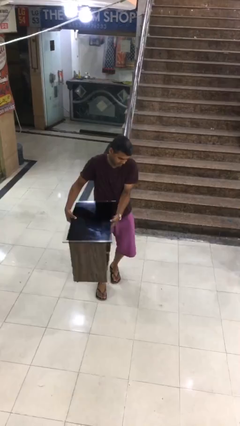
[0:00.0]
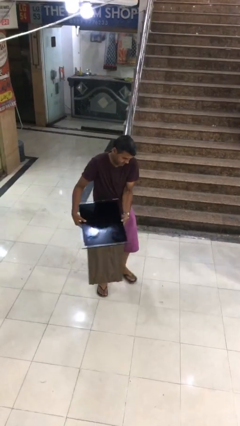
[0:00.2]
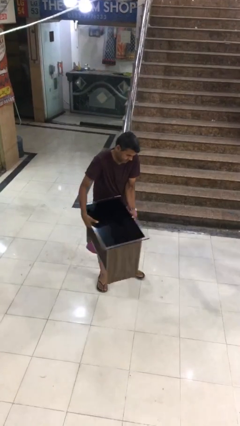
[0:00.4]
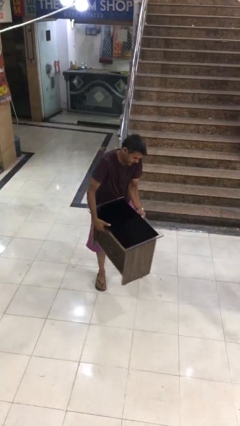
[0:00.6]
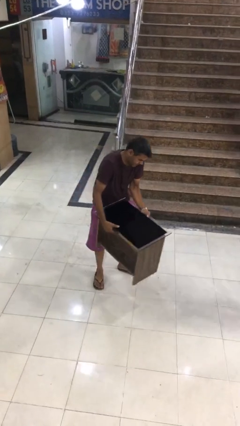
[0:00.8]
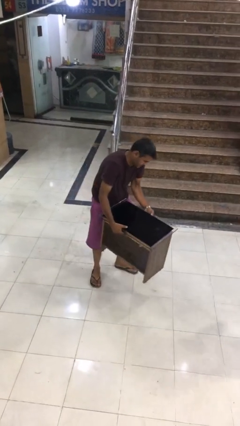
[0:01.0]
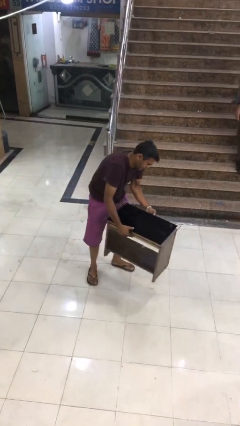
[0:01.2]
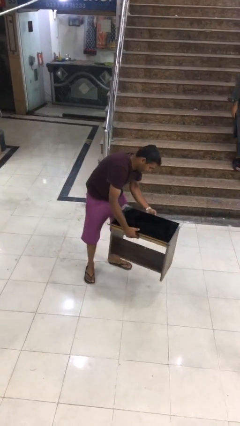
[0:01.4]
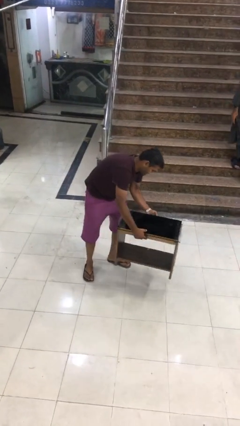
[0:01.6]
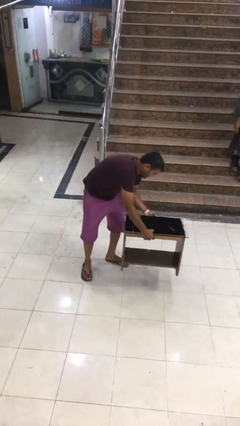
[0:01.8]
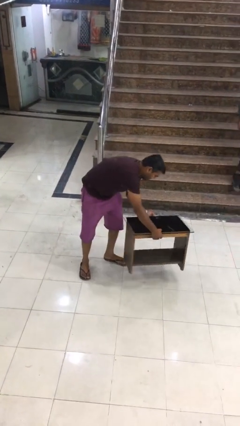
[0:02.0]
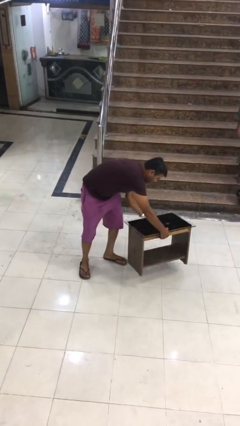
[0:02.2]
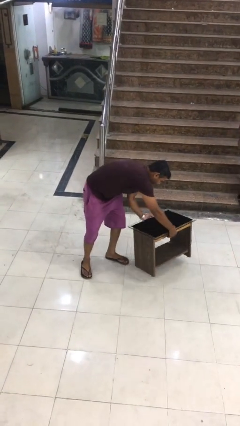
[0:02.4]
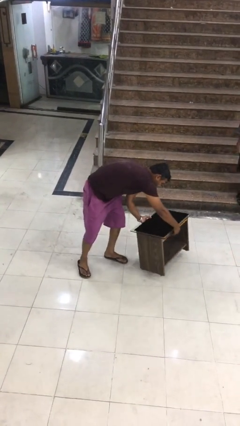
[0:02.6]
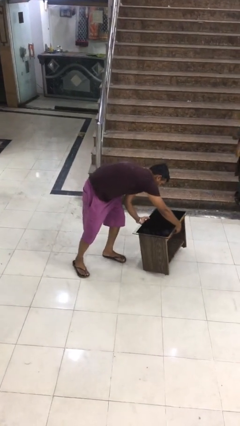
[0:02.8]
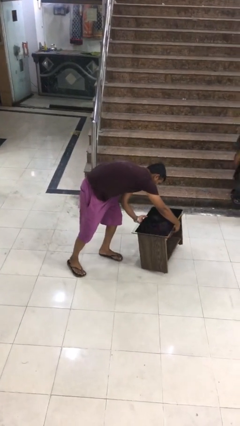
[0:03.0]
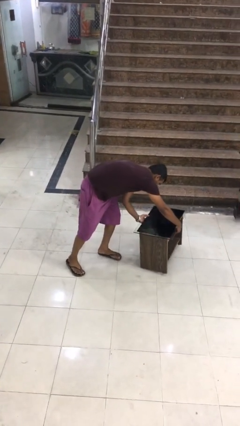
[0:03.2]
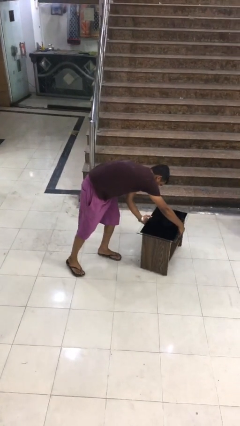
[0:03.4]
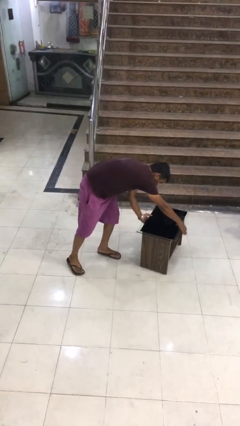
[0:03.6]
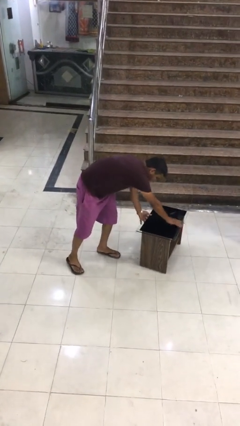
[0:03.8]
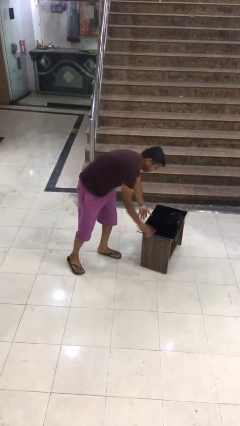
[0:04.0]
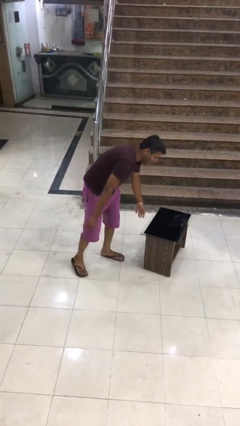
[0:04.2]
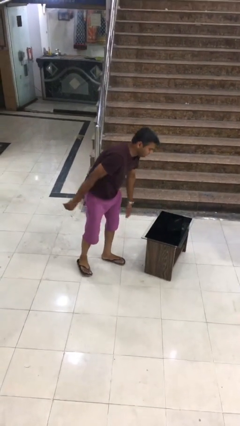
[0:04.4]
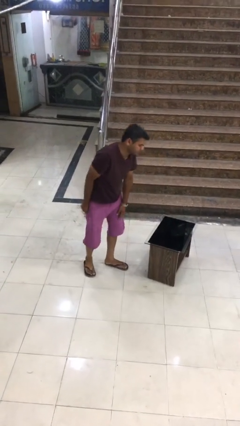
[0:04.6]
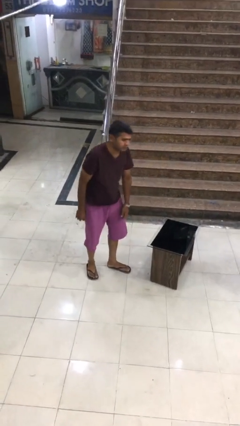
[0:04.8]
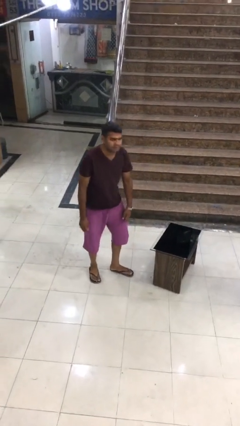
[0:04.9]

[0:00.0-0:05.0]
person puts down object on floor

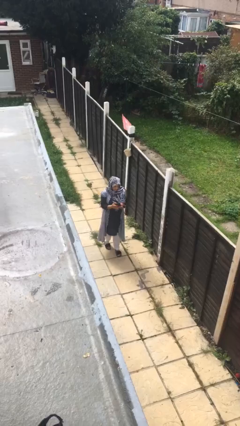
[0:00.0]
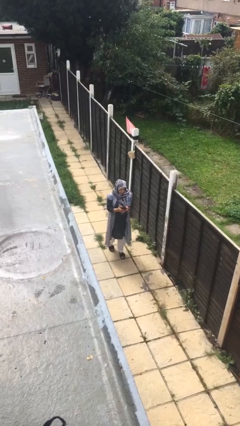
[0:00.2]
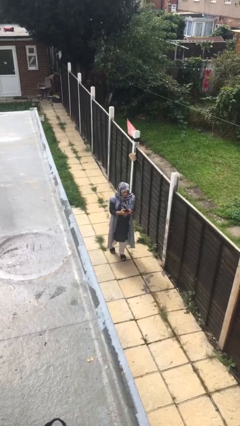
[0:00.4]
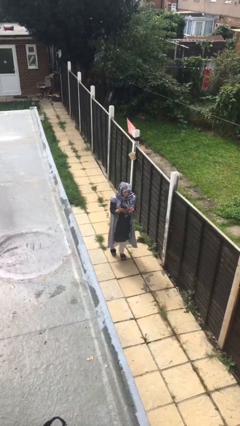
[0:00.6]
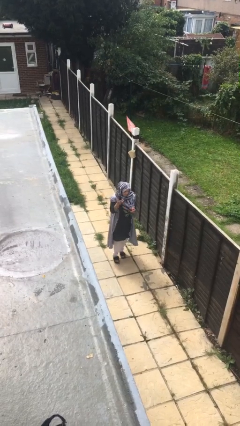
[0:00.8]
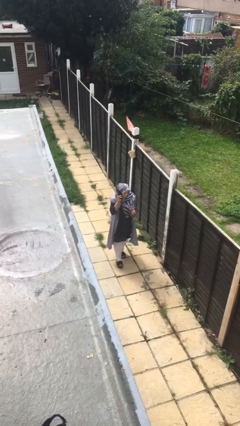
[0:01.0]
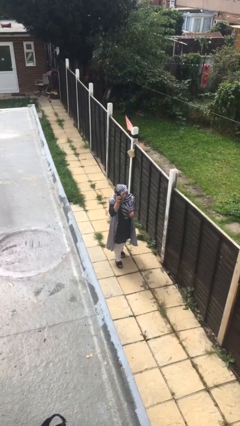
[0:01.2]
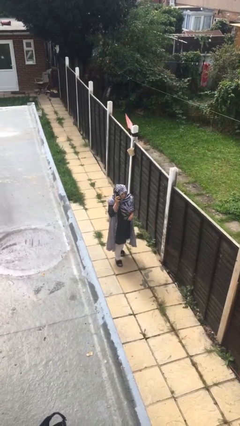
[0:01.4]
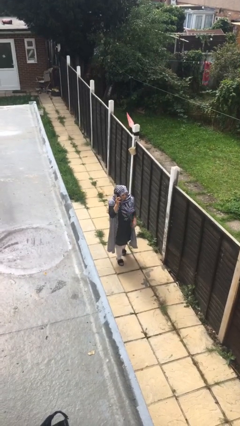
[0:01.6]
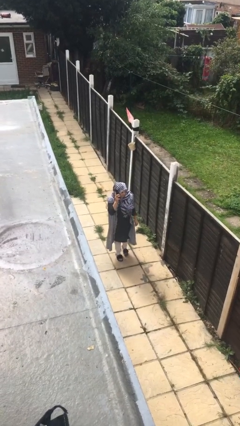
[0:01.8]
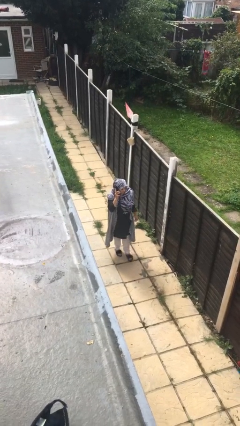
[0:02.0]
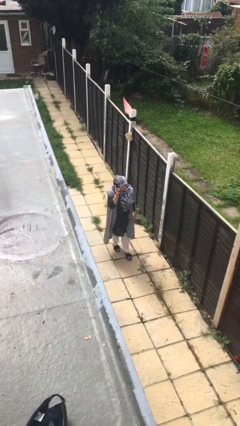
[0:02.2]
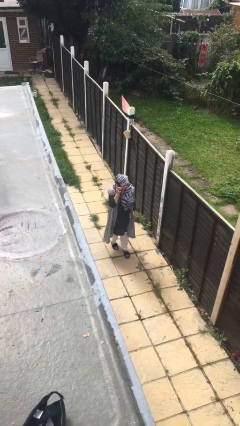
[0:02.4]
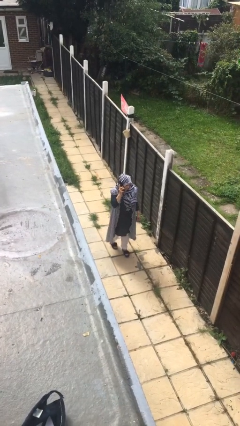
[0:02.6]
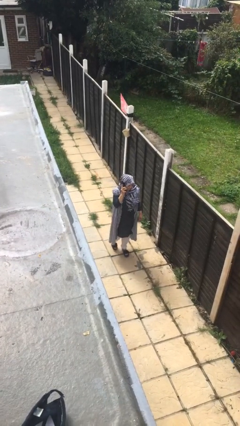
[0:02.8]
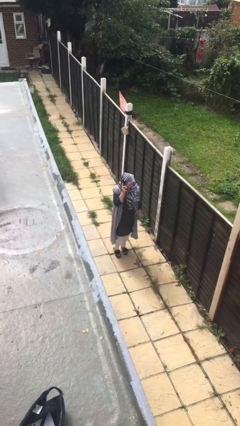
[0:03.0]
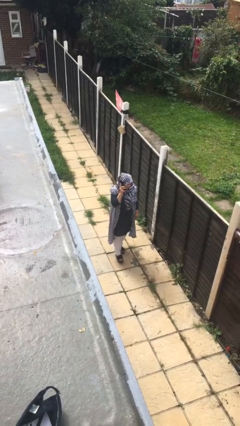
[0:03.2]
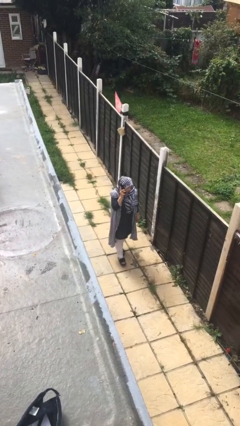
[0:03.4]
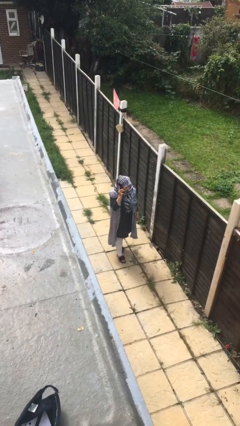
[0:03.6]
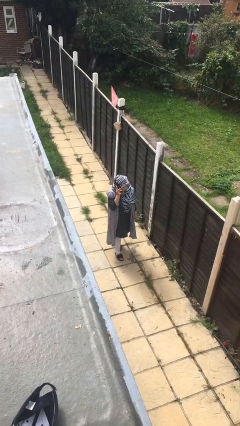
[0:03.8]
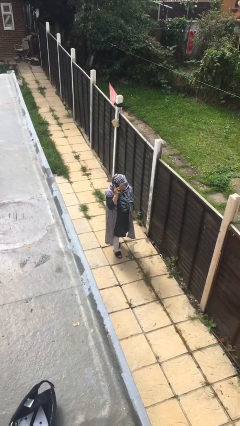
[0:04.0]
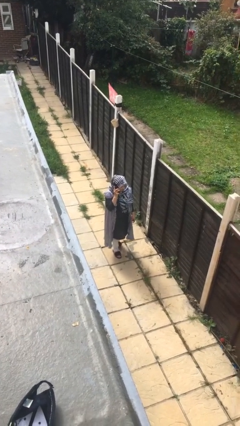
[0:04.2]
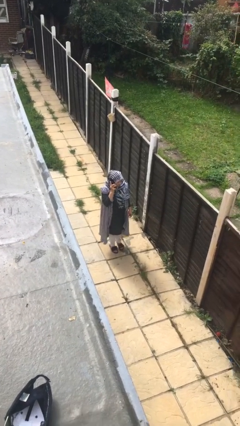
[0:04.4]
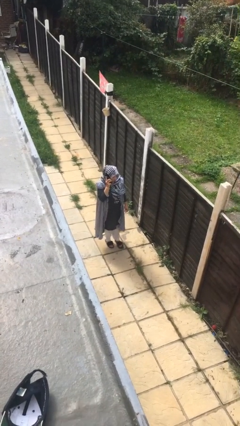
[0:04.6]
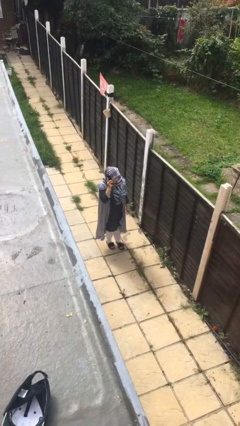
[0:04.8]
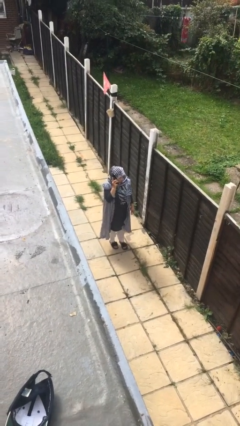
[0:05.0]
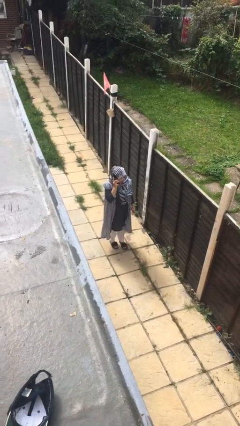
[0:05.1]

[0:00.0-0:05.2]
person talks on phone

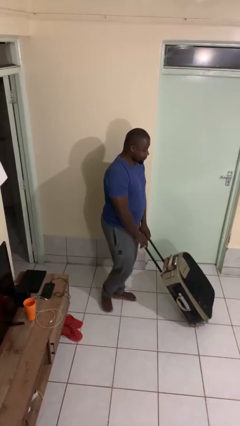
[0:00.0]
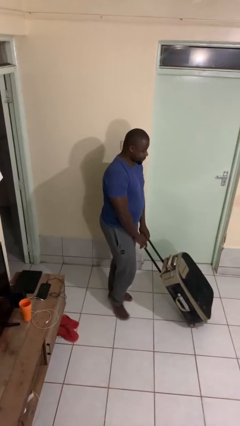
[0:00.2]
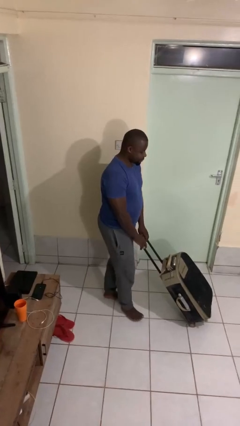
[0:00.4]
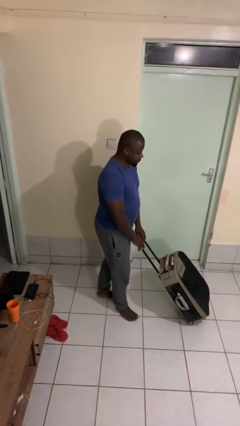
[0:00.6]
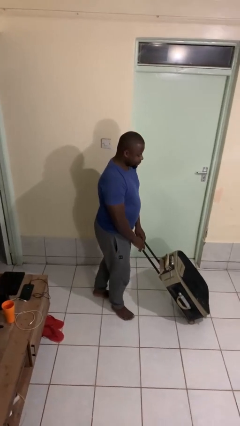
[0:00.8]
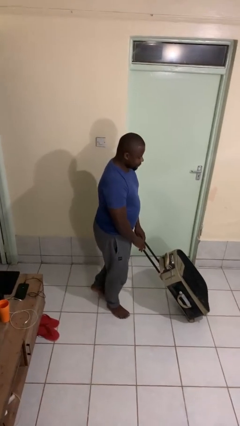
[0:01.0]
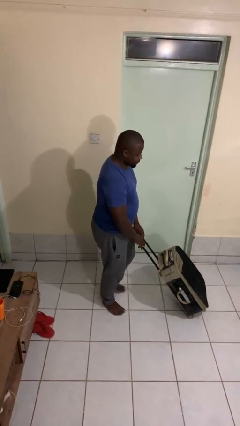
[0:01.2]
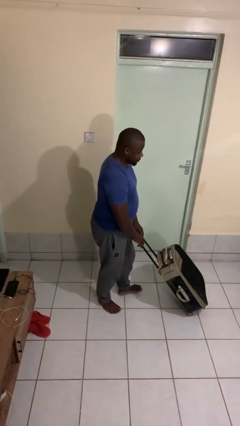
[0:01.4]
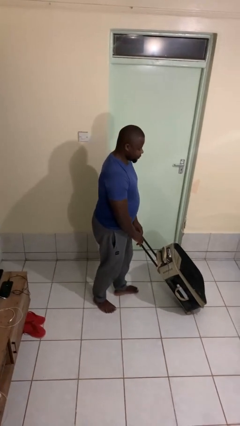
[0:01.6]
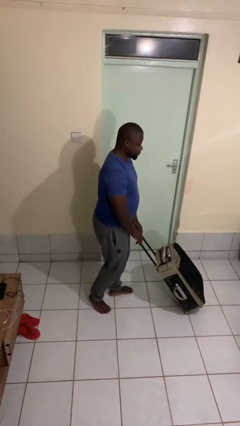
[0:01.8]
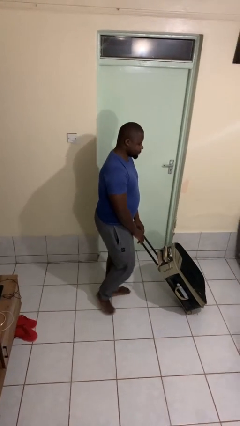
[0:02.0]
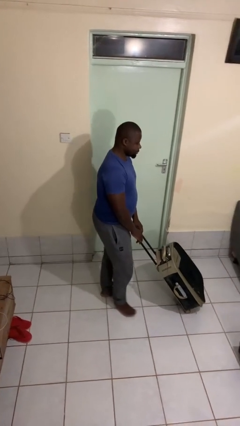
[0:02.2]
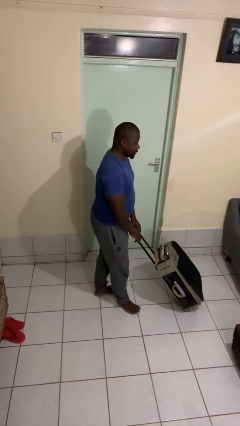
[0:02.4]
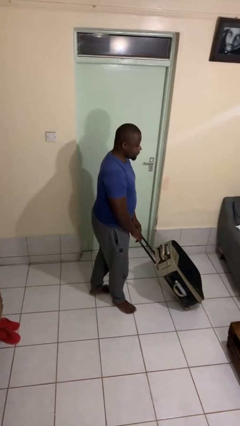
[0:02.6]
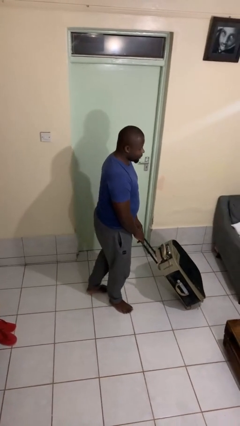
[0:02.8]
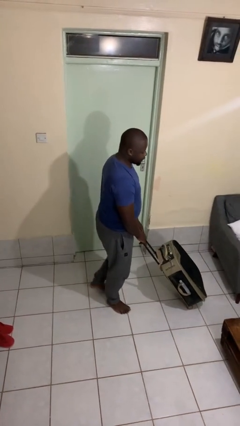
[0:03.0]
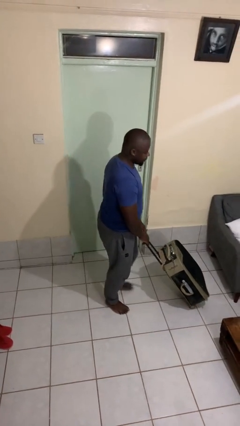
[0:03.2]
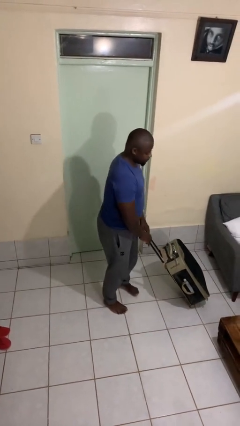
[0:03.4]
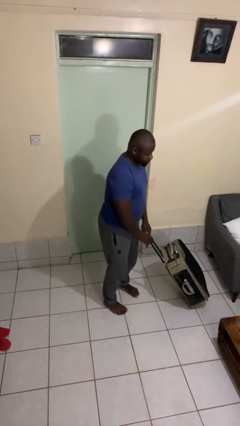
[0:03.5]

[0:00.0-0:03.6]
person pushes wheeled cart

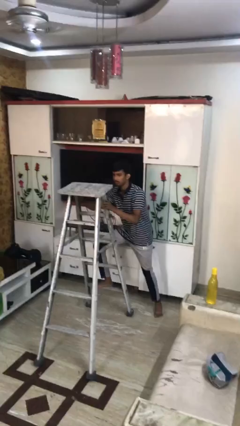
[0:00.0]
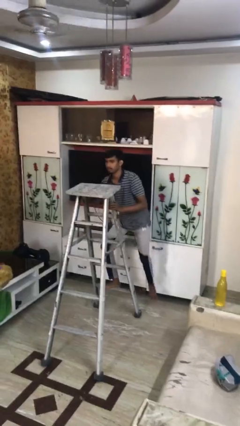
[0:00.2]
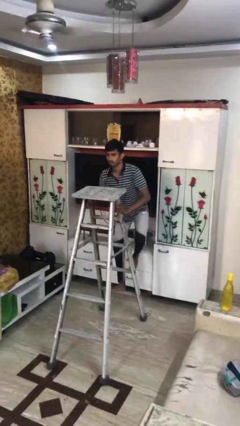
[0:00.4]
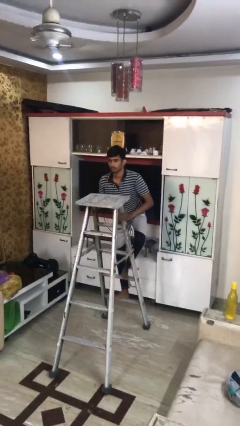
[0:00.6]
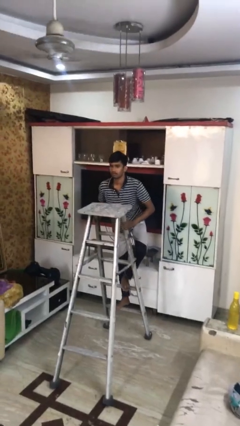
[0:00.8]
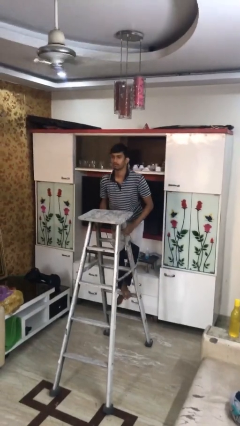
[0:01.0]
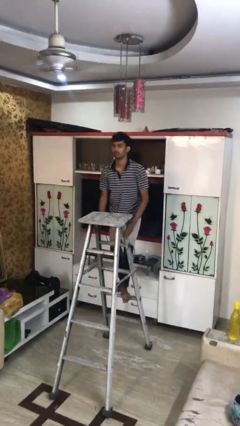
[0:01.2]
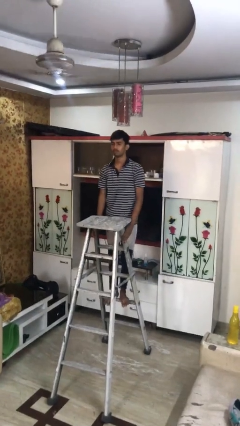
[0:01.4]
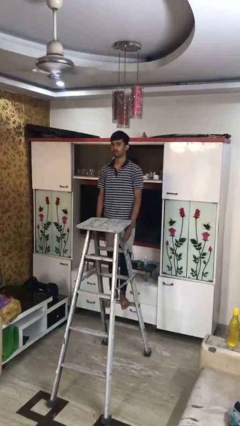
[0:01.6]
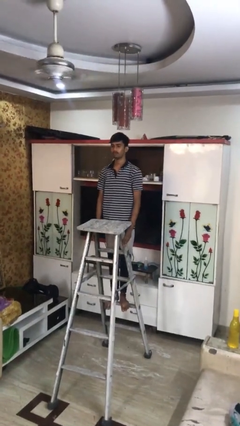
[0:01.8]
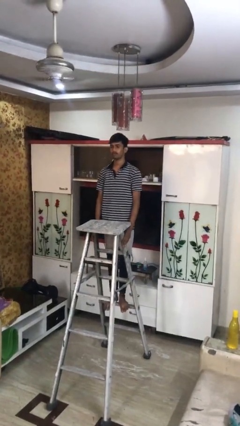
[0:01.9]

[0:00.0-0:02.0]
person climbs up ladder

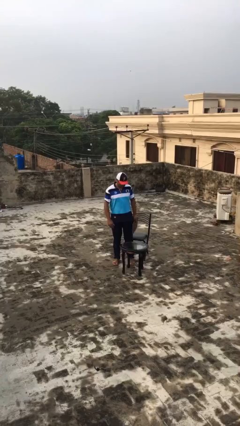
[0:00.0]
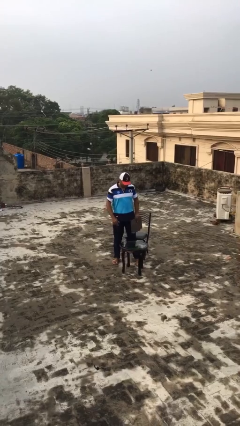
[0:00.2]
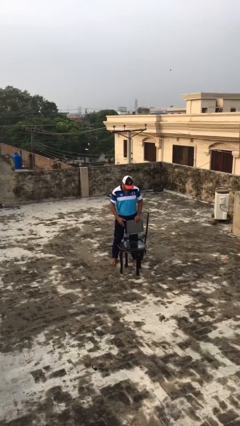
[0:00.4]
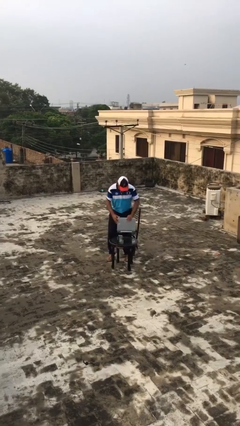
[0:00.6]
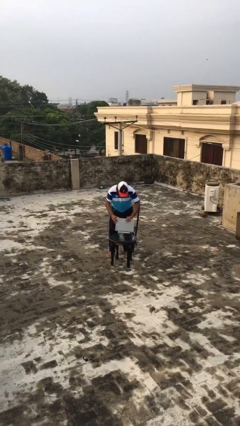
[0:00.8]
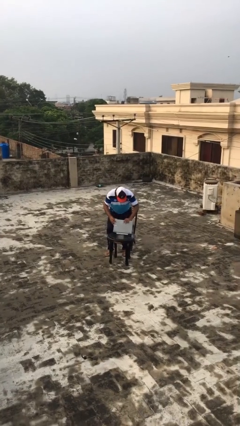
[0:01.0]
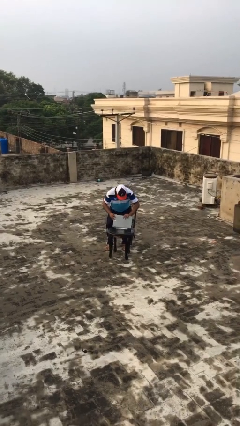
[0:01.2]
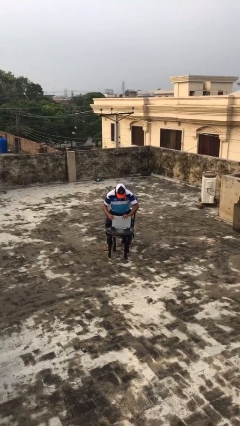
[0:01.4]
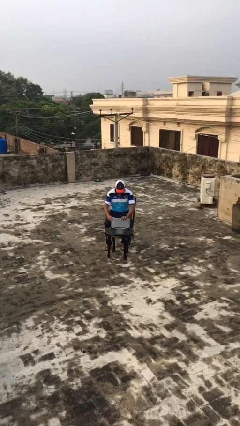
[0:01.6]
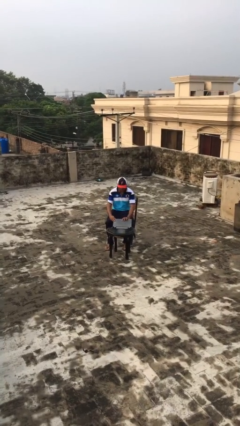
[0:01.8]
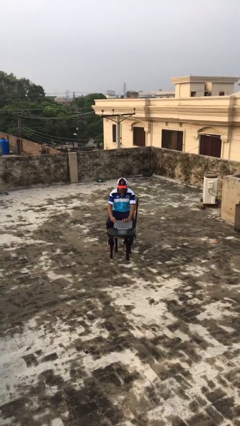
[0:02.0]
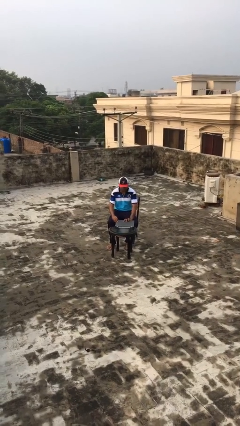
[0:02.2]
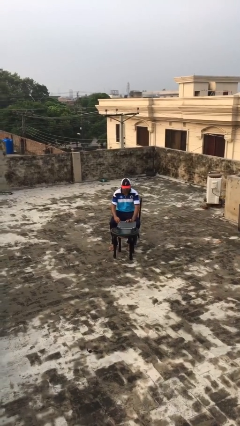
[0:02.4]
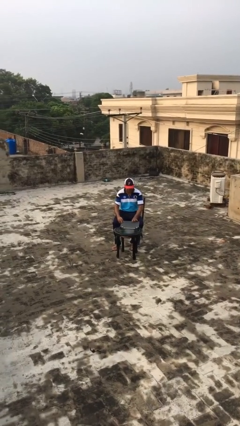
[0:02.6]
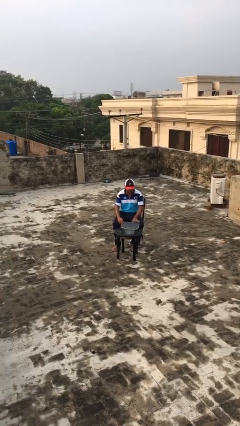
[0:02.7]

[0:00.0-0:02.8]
person sits down
